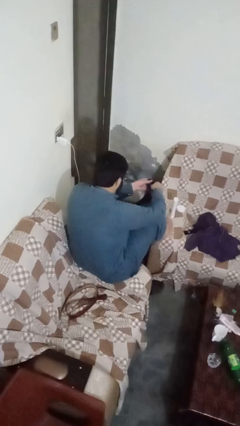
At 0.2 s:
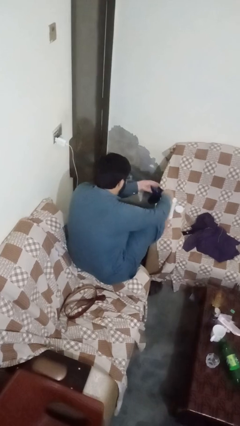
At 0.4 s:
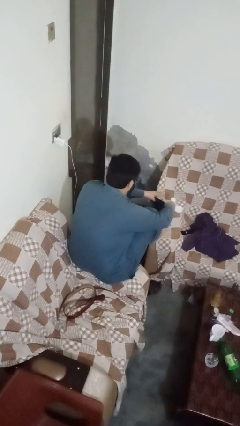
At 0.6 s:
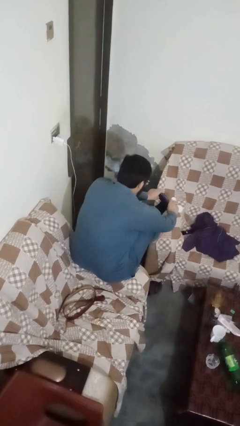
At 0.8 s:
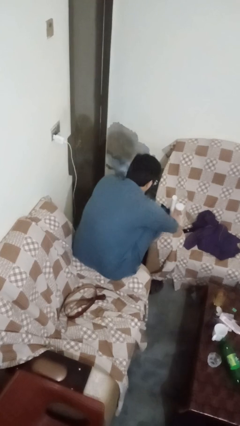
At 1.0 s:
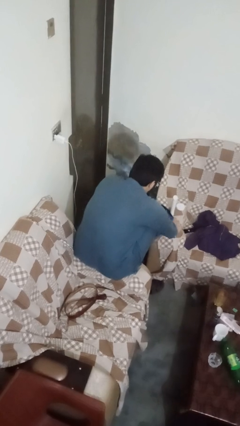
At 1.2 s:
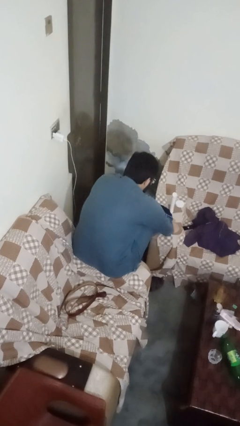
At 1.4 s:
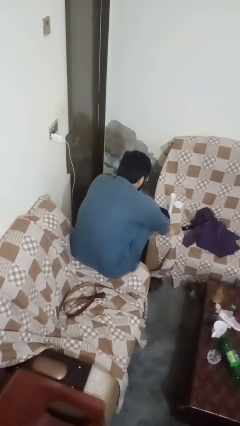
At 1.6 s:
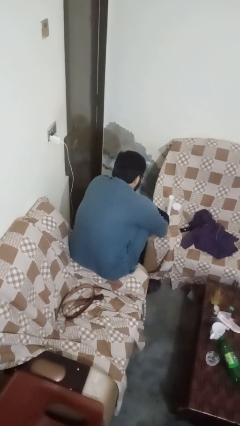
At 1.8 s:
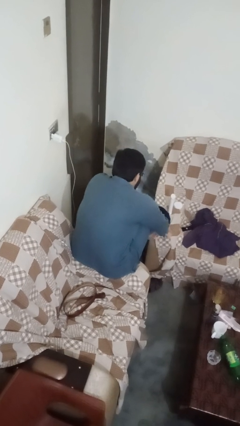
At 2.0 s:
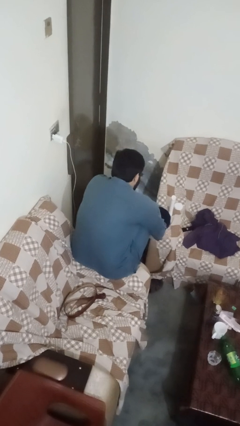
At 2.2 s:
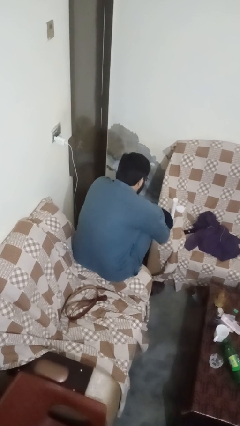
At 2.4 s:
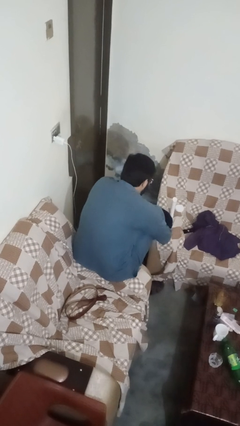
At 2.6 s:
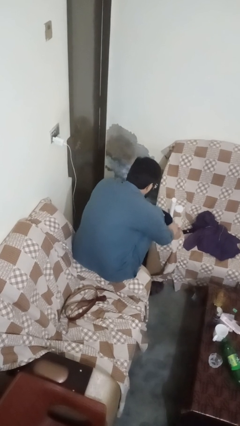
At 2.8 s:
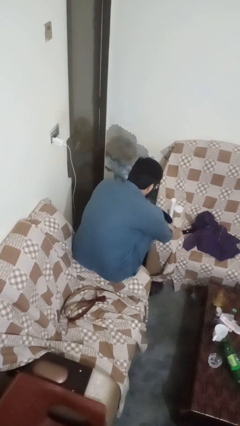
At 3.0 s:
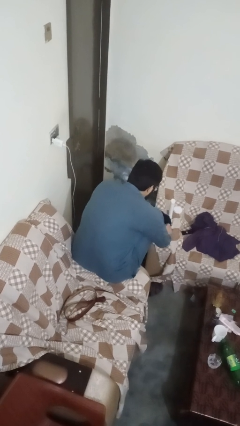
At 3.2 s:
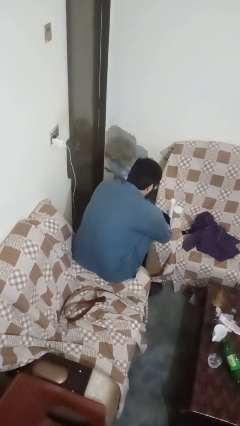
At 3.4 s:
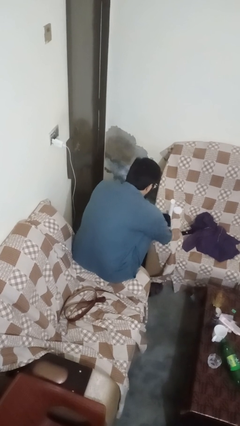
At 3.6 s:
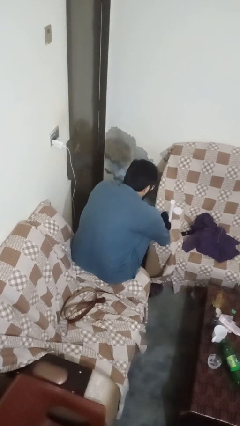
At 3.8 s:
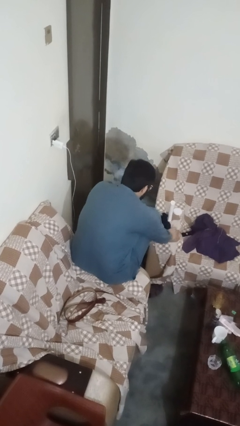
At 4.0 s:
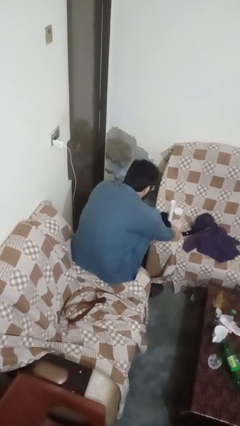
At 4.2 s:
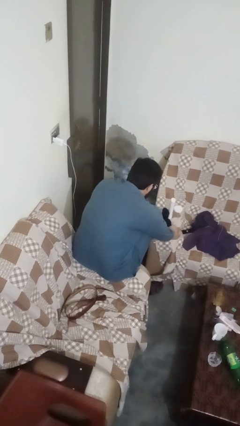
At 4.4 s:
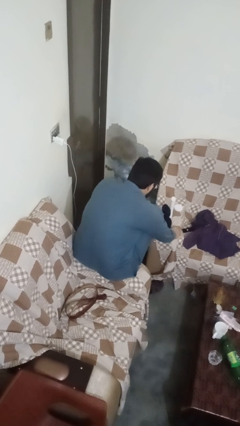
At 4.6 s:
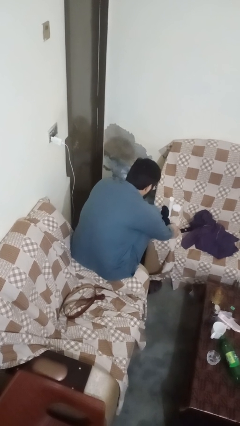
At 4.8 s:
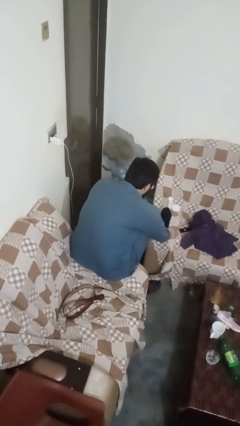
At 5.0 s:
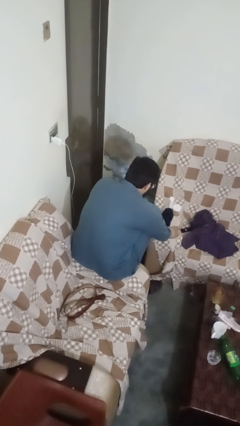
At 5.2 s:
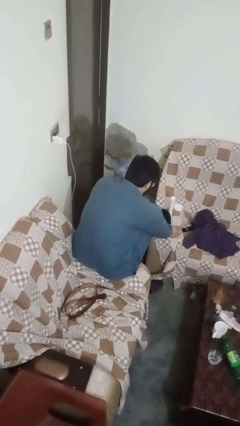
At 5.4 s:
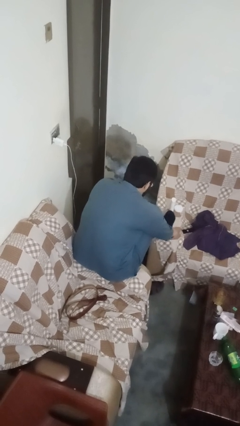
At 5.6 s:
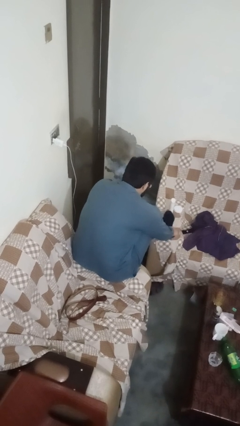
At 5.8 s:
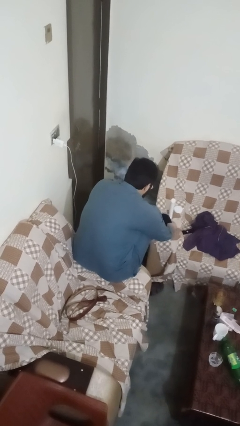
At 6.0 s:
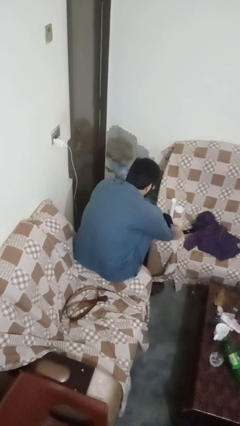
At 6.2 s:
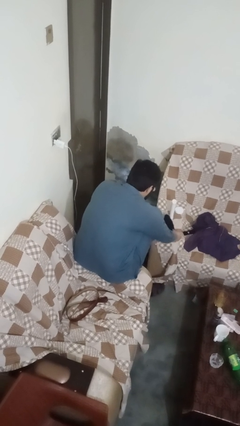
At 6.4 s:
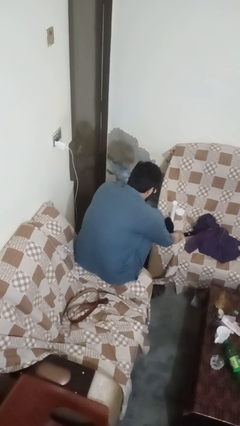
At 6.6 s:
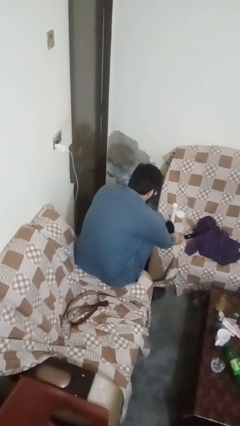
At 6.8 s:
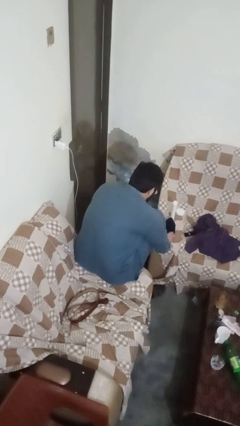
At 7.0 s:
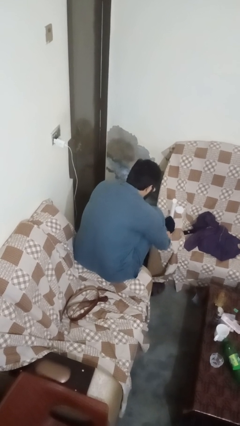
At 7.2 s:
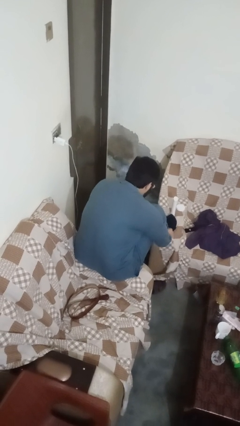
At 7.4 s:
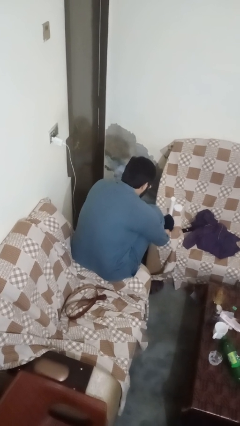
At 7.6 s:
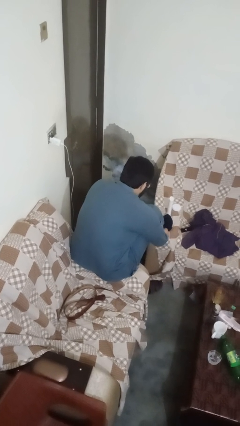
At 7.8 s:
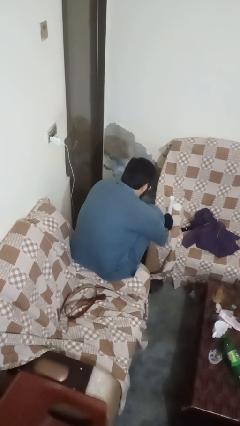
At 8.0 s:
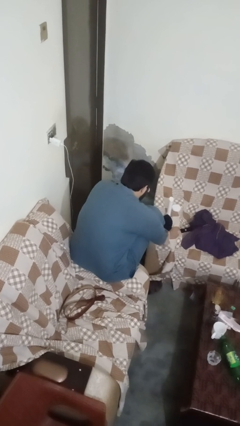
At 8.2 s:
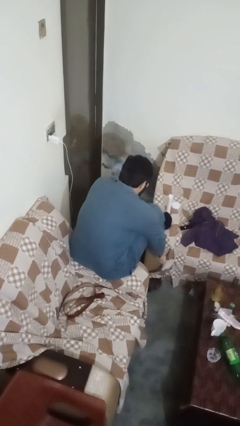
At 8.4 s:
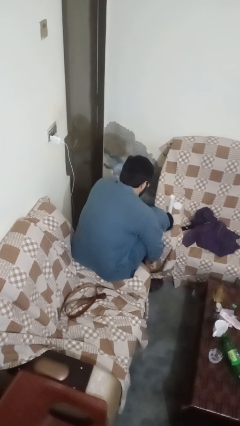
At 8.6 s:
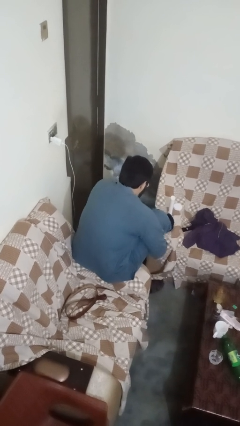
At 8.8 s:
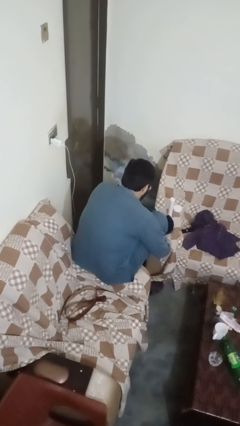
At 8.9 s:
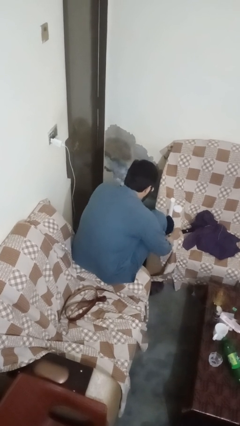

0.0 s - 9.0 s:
person puts on socks

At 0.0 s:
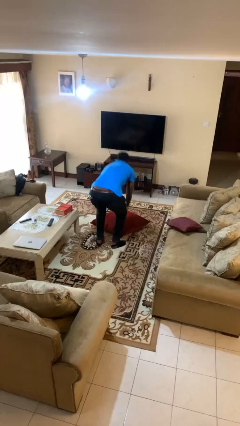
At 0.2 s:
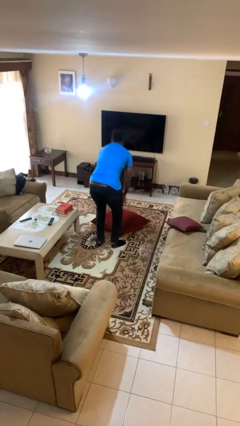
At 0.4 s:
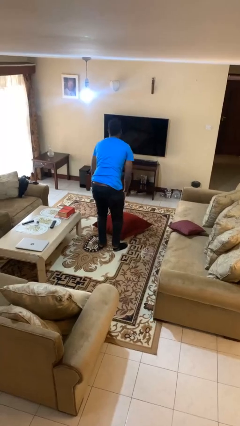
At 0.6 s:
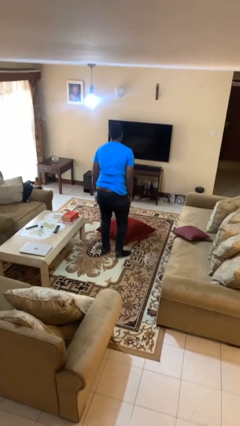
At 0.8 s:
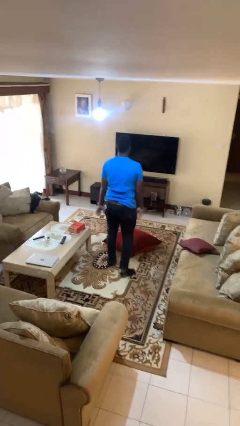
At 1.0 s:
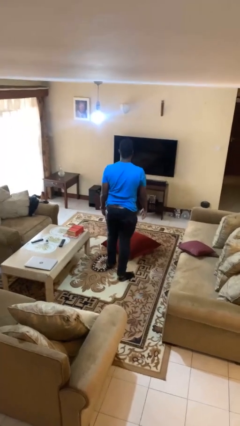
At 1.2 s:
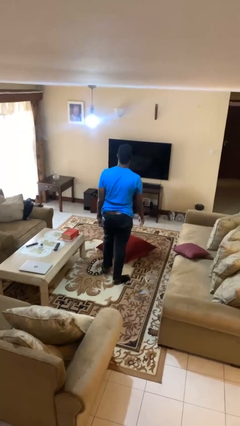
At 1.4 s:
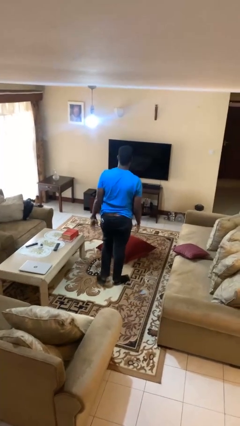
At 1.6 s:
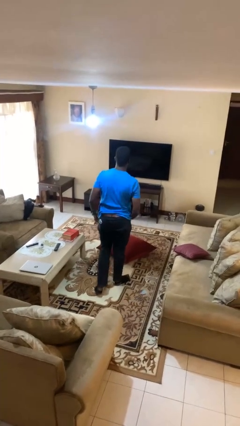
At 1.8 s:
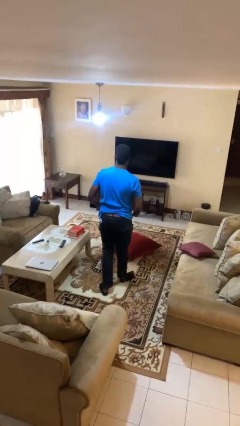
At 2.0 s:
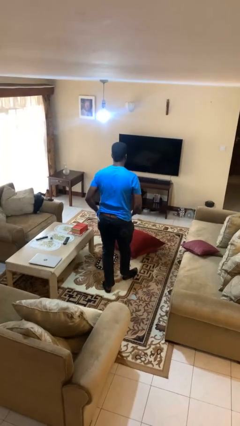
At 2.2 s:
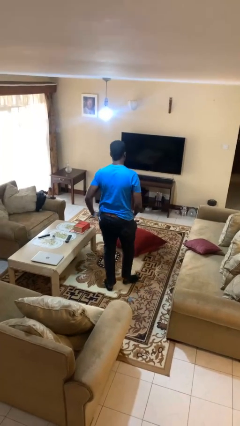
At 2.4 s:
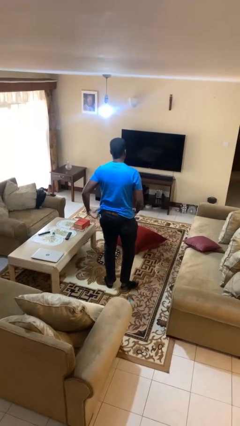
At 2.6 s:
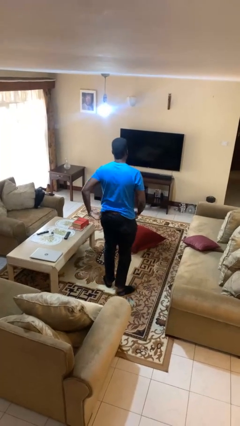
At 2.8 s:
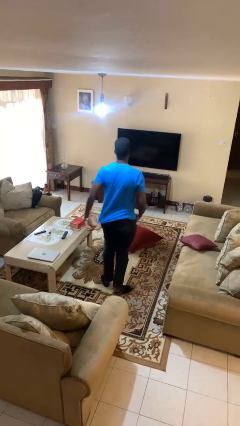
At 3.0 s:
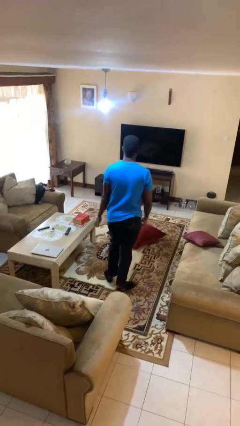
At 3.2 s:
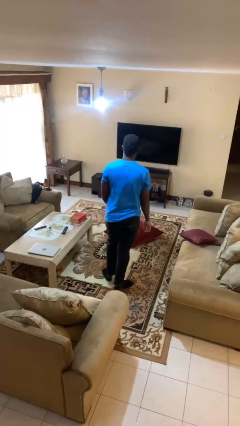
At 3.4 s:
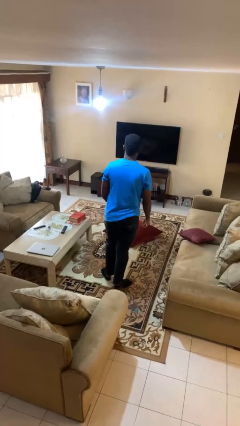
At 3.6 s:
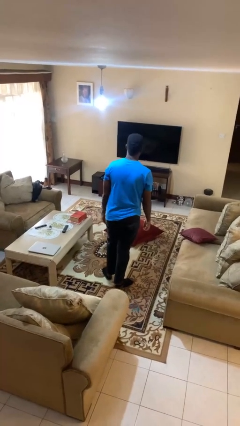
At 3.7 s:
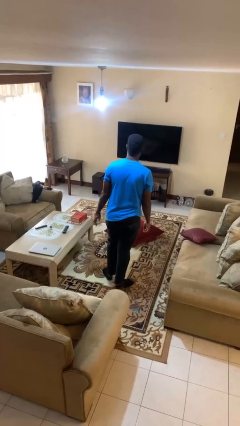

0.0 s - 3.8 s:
person stands up from floor

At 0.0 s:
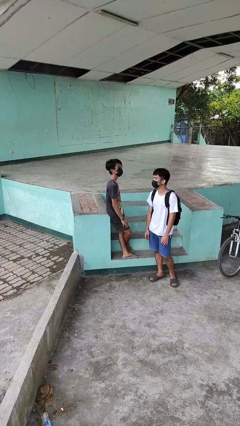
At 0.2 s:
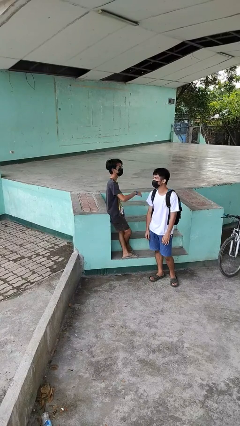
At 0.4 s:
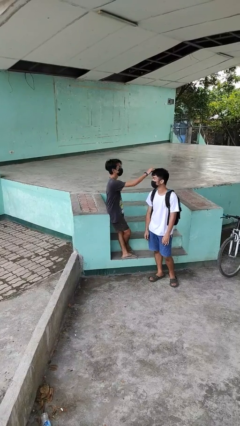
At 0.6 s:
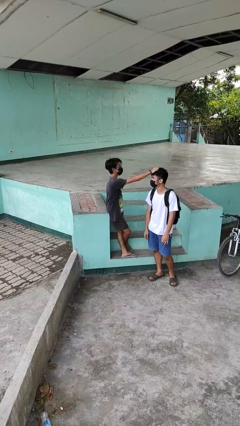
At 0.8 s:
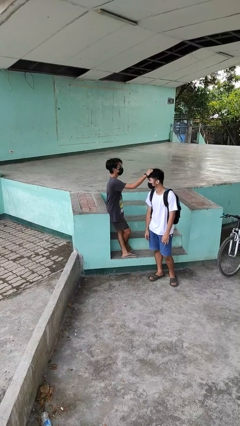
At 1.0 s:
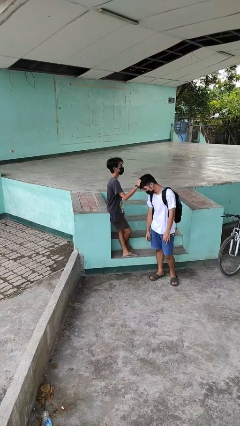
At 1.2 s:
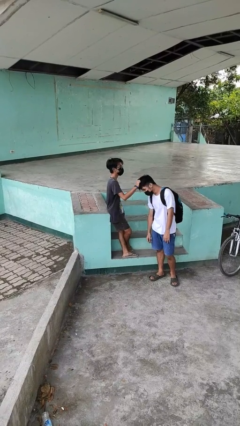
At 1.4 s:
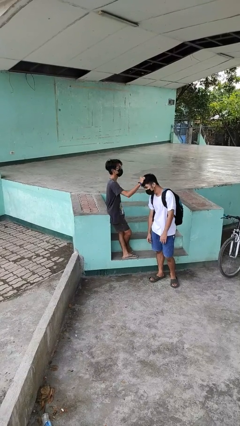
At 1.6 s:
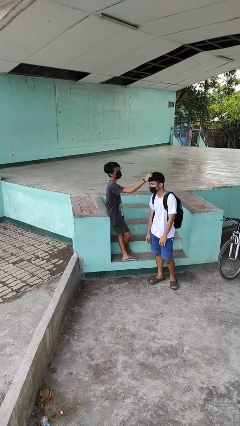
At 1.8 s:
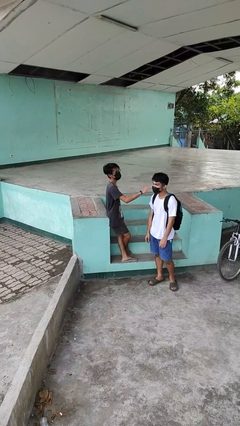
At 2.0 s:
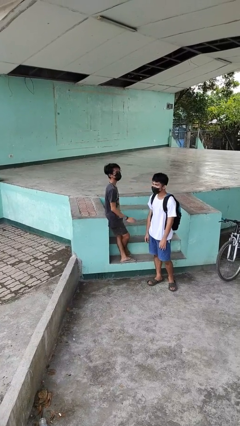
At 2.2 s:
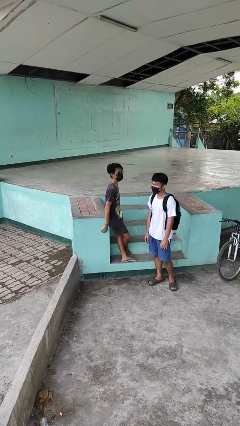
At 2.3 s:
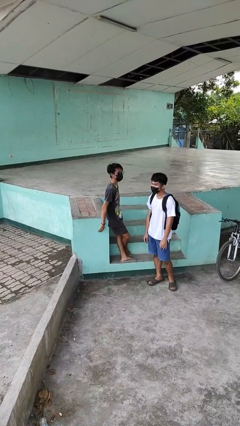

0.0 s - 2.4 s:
person grabs person by hair

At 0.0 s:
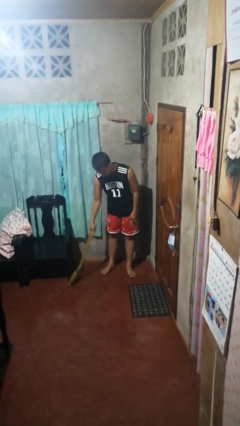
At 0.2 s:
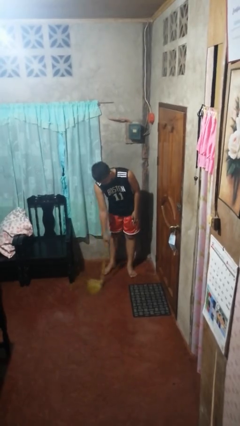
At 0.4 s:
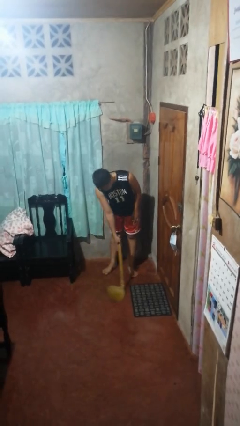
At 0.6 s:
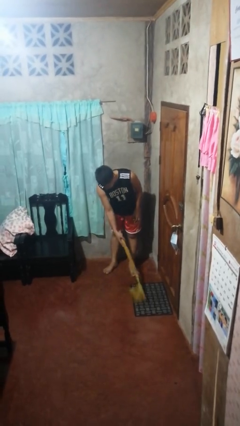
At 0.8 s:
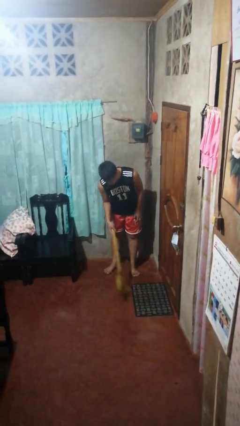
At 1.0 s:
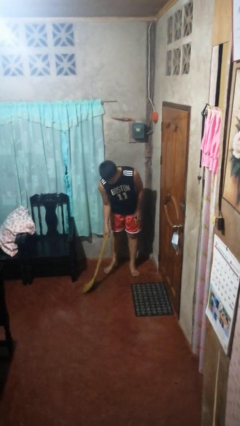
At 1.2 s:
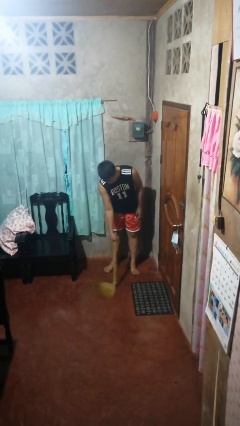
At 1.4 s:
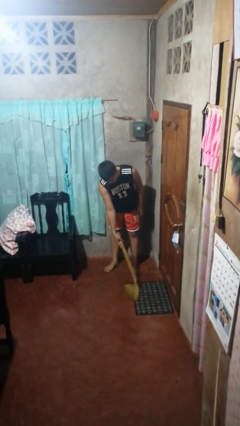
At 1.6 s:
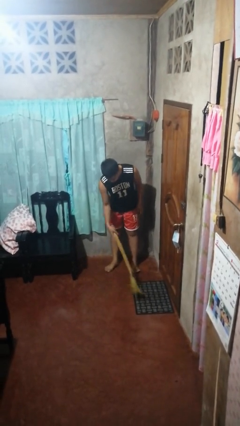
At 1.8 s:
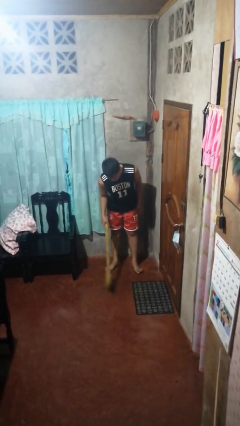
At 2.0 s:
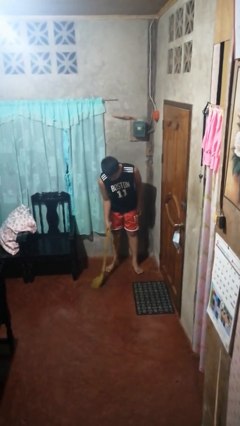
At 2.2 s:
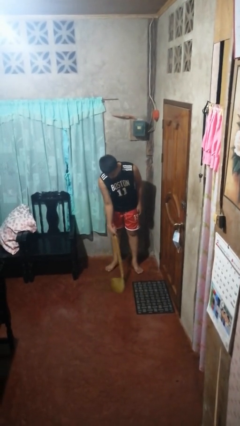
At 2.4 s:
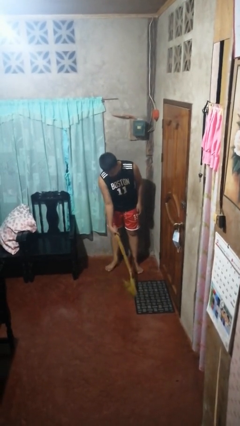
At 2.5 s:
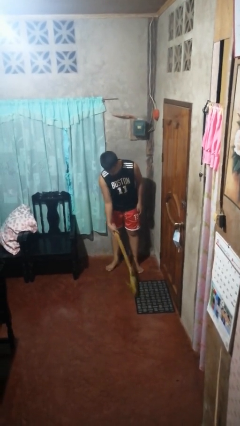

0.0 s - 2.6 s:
person sweeps floor
